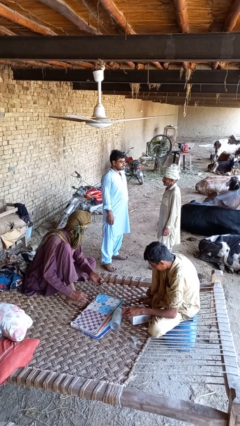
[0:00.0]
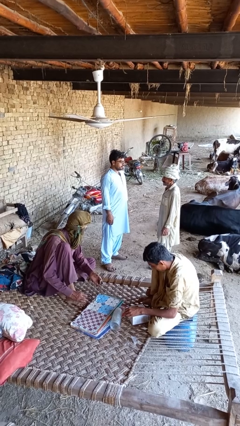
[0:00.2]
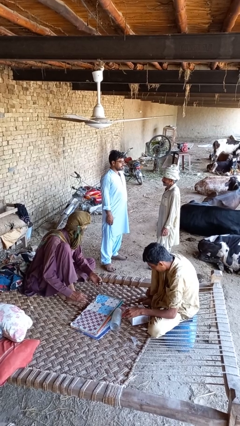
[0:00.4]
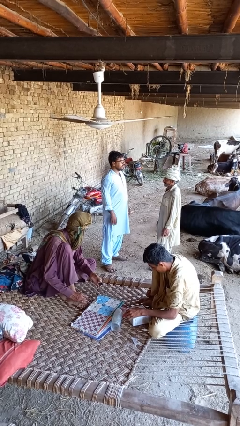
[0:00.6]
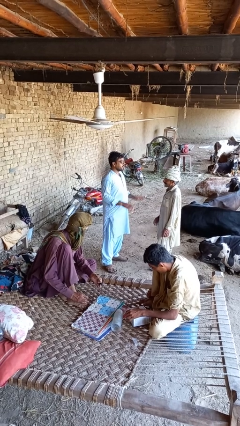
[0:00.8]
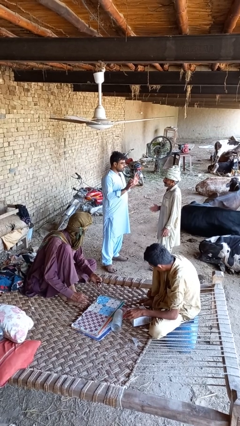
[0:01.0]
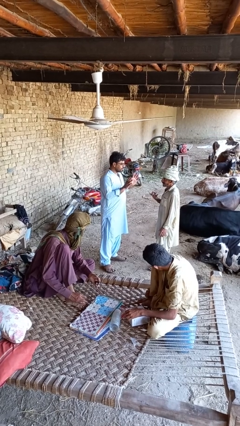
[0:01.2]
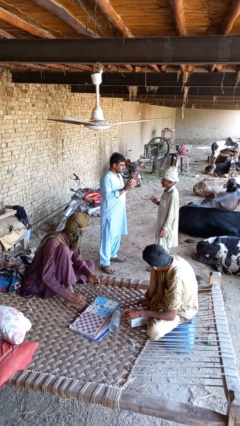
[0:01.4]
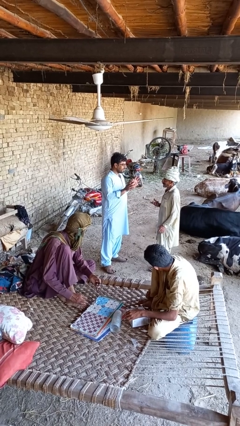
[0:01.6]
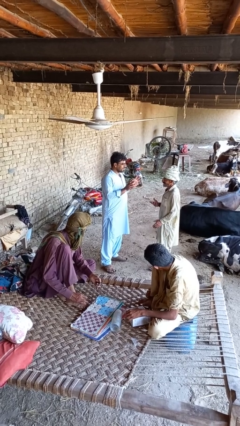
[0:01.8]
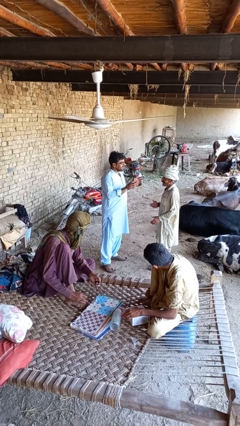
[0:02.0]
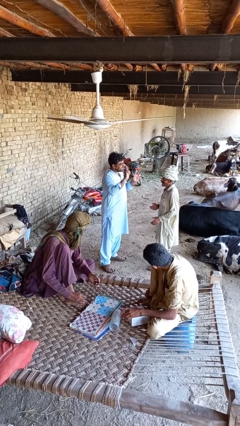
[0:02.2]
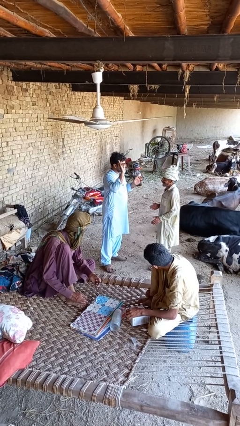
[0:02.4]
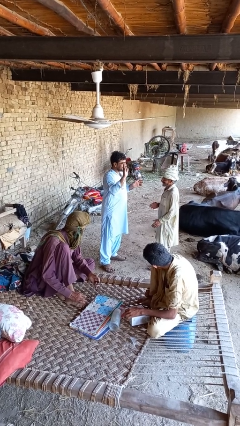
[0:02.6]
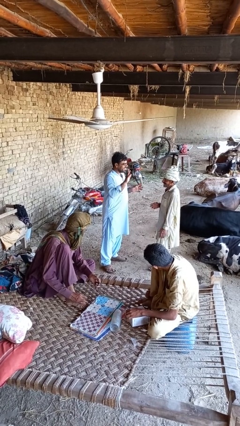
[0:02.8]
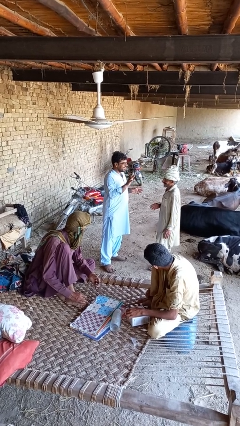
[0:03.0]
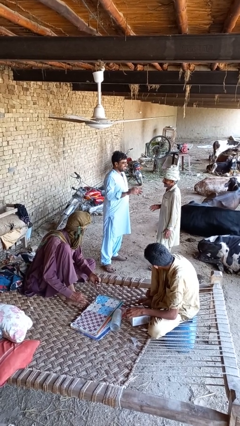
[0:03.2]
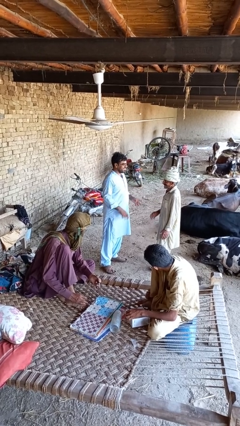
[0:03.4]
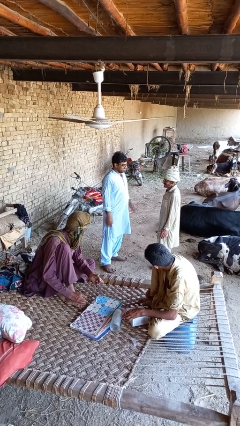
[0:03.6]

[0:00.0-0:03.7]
person talks to person

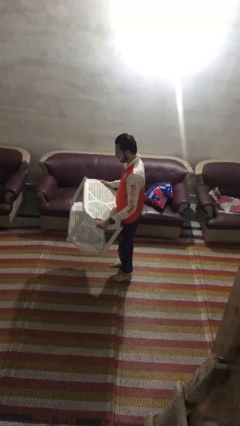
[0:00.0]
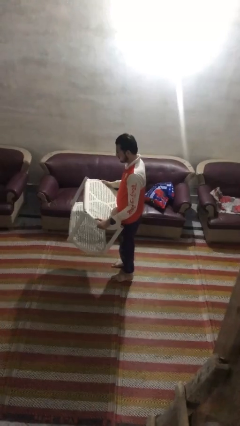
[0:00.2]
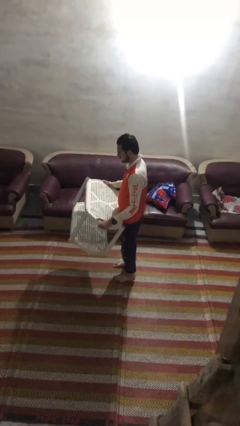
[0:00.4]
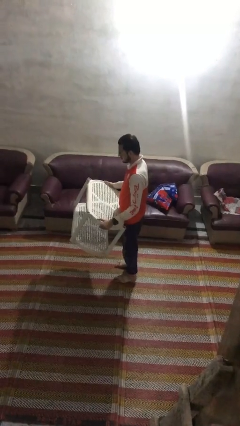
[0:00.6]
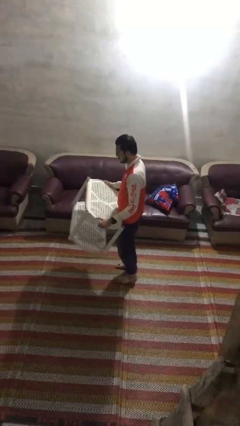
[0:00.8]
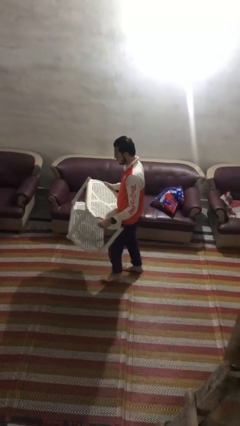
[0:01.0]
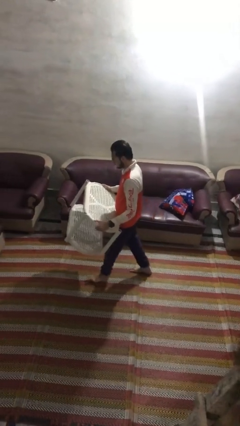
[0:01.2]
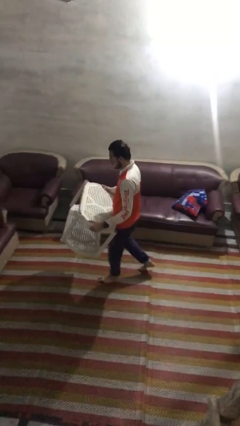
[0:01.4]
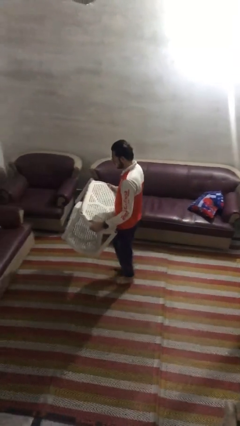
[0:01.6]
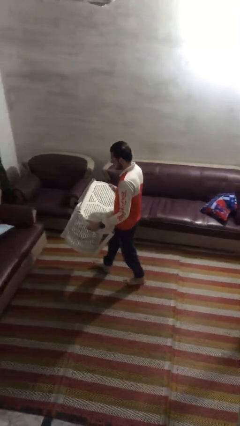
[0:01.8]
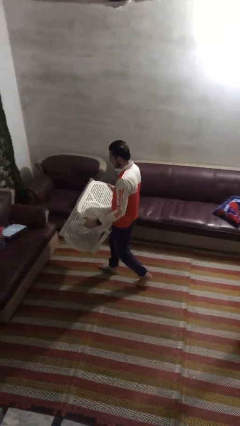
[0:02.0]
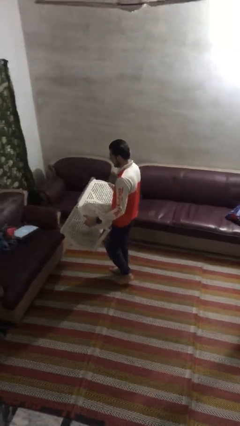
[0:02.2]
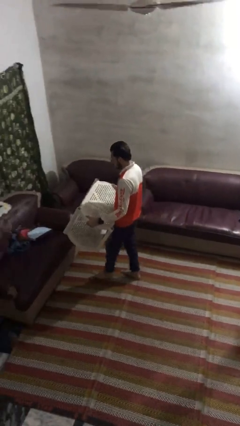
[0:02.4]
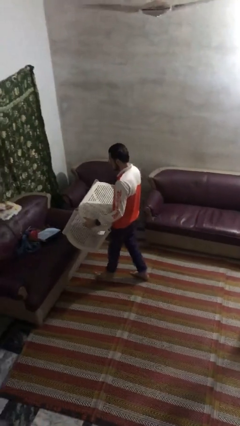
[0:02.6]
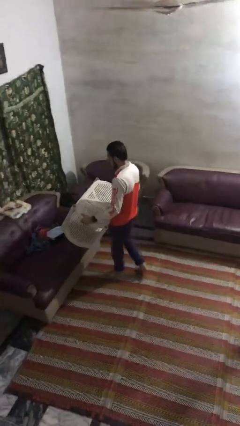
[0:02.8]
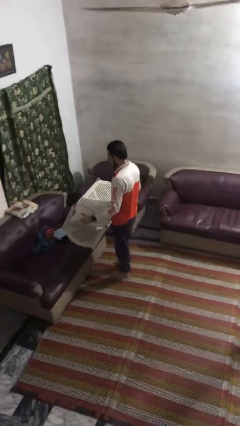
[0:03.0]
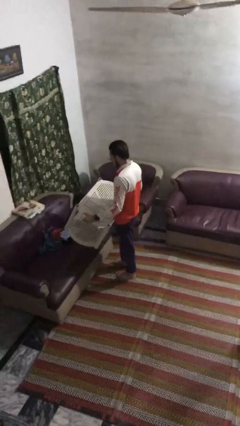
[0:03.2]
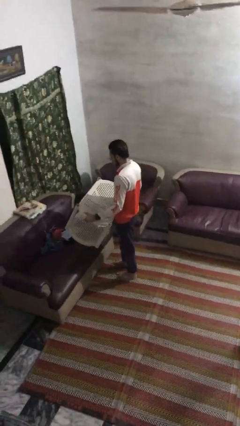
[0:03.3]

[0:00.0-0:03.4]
person carries furniture

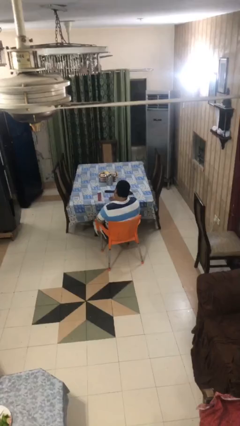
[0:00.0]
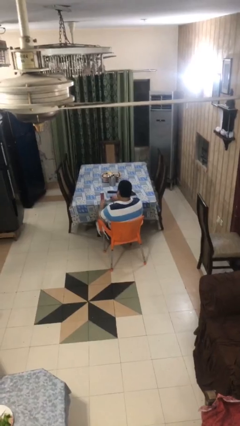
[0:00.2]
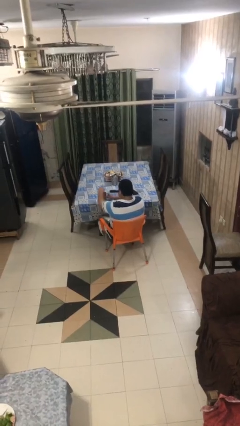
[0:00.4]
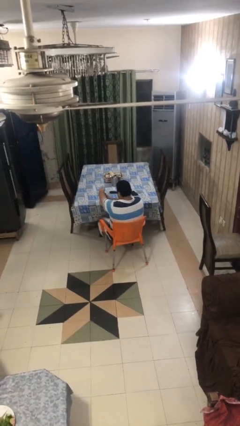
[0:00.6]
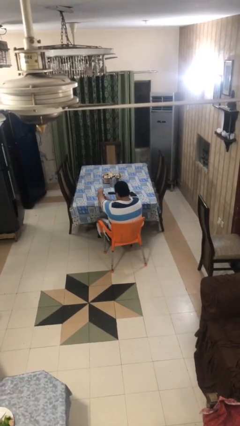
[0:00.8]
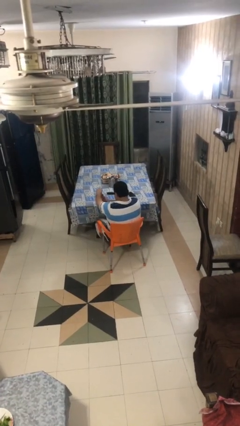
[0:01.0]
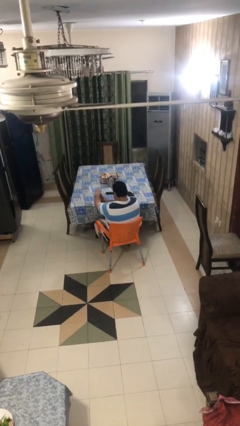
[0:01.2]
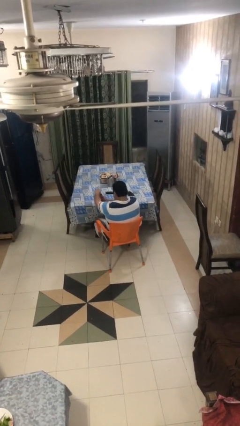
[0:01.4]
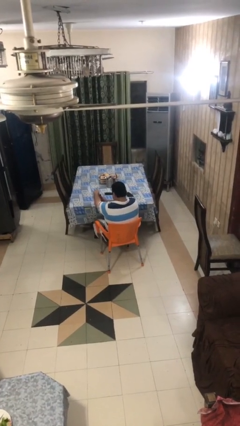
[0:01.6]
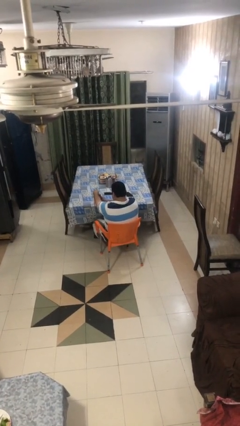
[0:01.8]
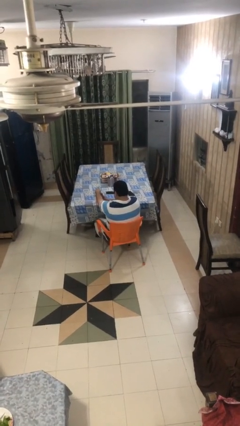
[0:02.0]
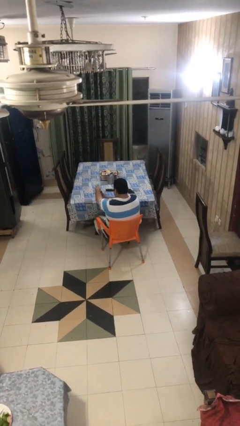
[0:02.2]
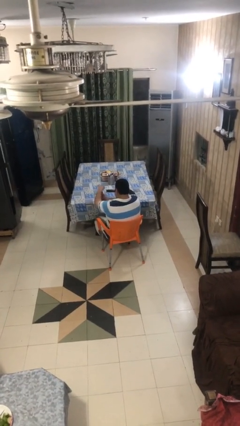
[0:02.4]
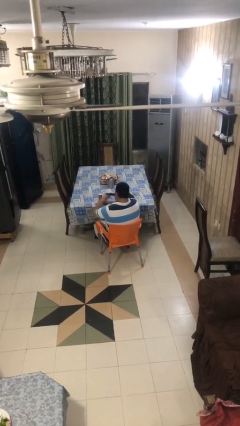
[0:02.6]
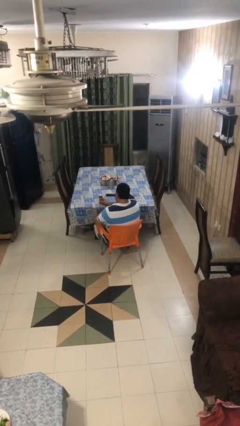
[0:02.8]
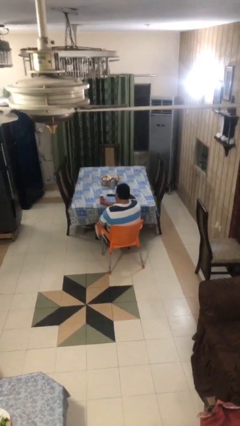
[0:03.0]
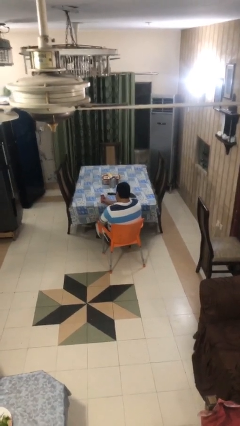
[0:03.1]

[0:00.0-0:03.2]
person opens beverage can

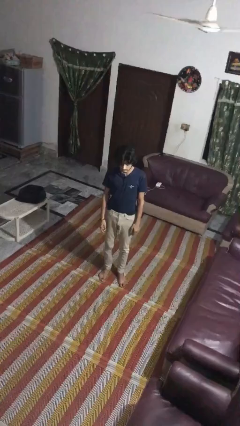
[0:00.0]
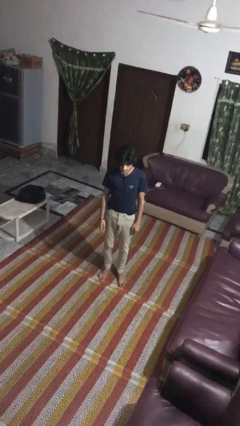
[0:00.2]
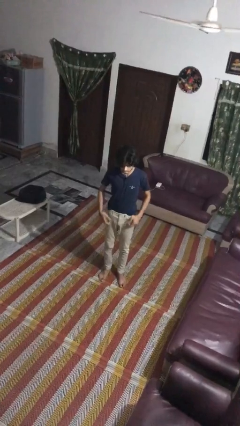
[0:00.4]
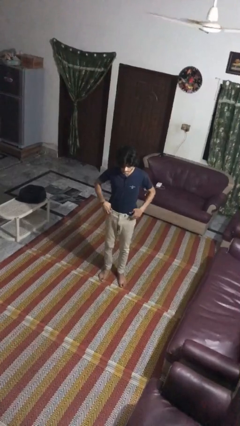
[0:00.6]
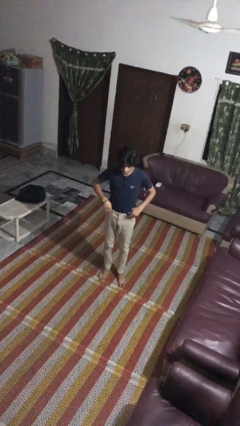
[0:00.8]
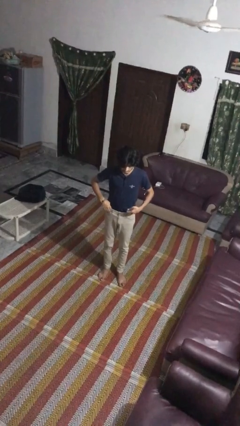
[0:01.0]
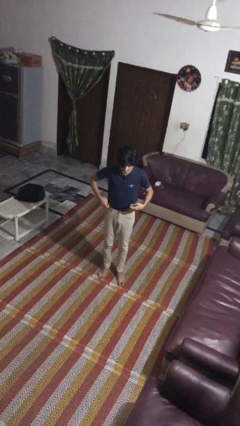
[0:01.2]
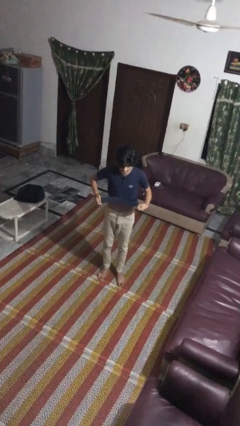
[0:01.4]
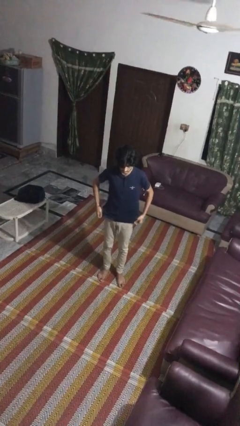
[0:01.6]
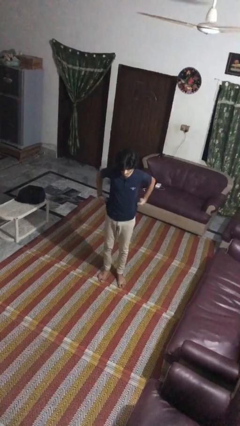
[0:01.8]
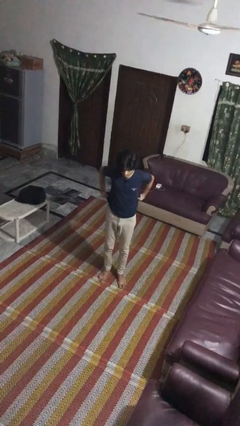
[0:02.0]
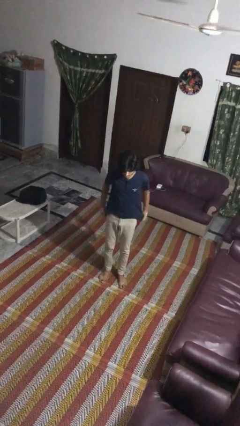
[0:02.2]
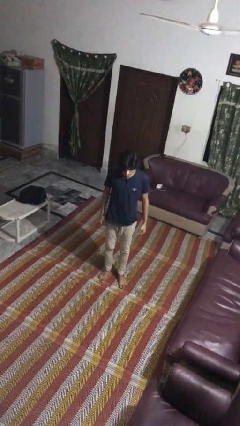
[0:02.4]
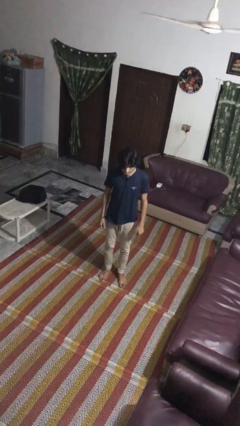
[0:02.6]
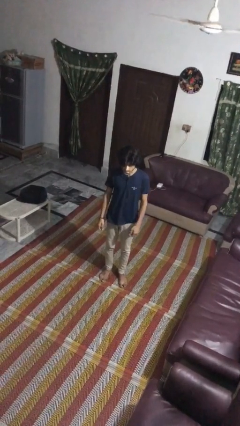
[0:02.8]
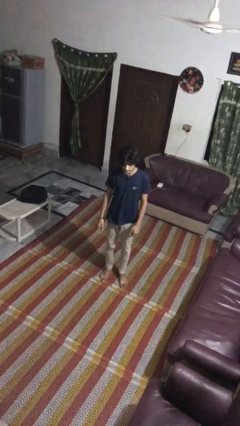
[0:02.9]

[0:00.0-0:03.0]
person untucks shirt

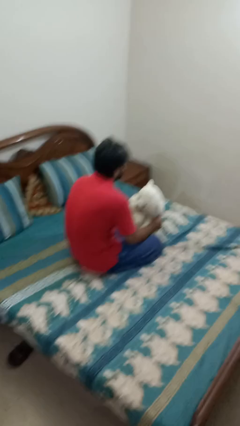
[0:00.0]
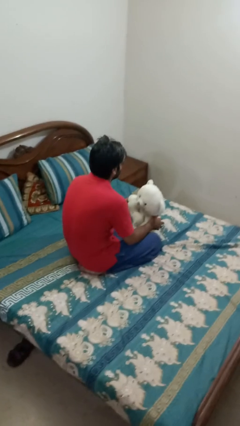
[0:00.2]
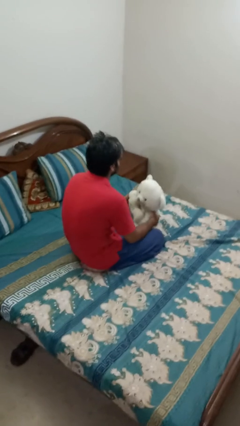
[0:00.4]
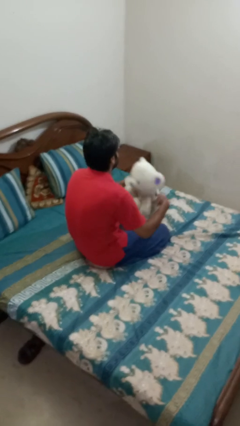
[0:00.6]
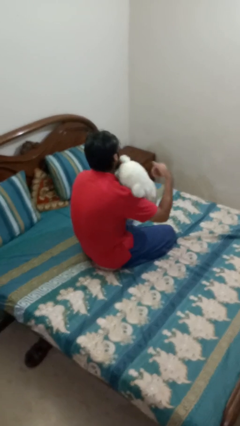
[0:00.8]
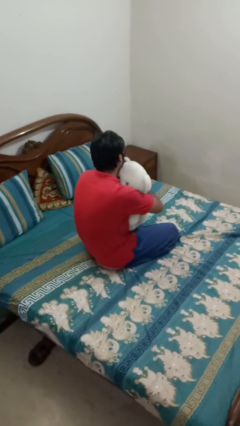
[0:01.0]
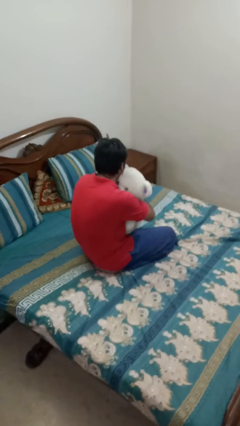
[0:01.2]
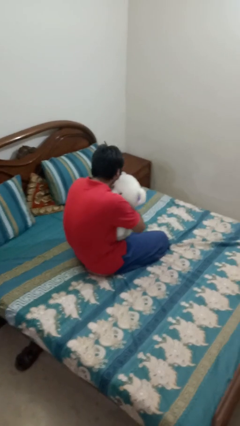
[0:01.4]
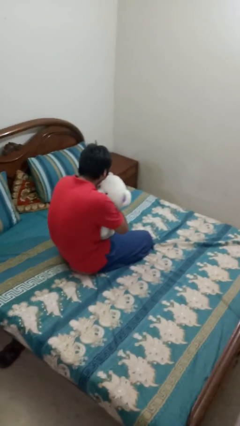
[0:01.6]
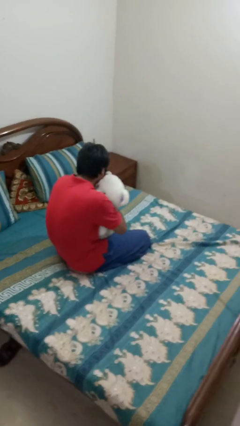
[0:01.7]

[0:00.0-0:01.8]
person hugs stuffed animal

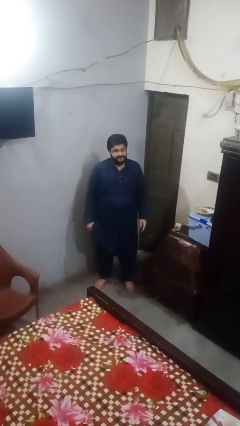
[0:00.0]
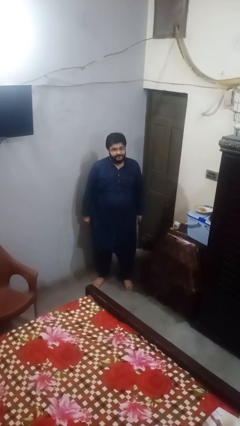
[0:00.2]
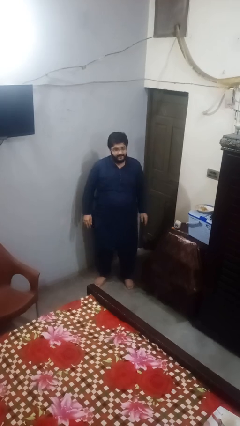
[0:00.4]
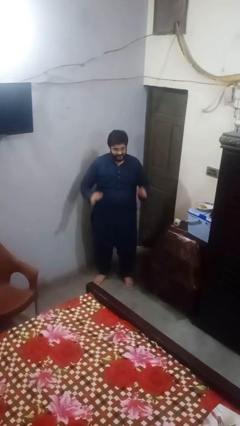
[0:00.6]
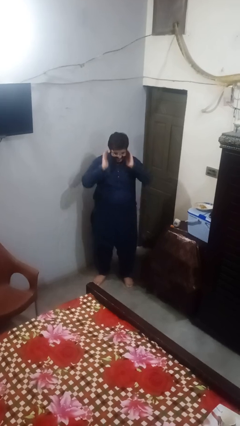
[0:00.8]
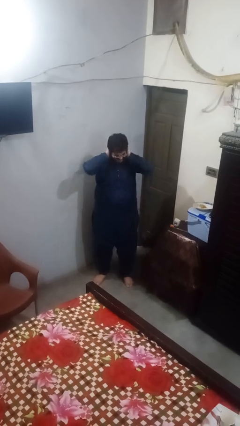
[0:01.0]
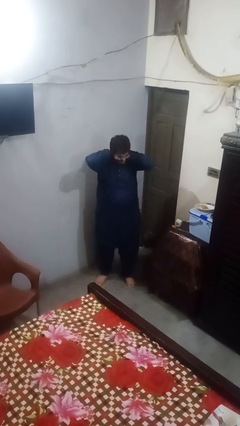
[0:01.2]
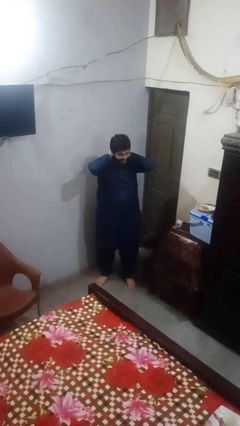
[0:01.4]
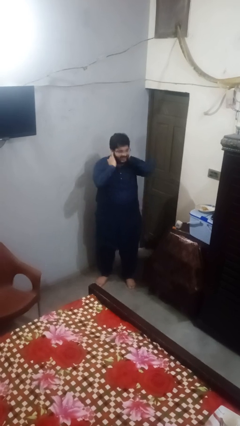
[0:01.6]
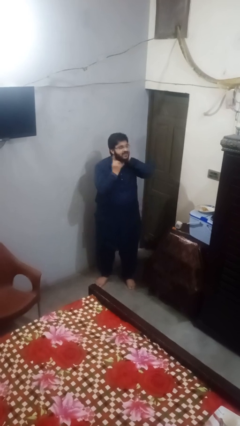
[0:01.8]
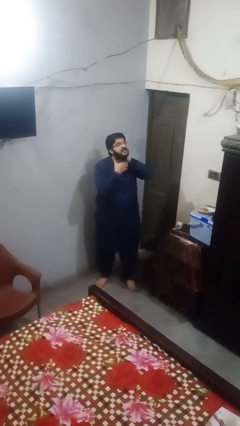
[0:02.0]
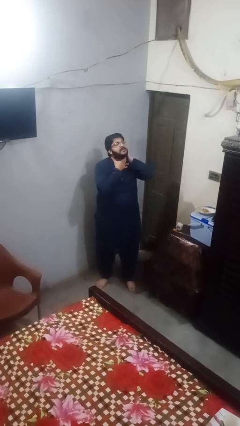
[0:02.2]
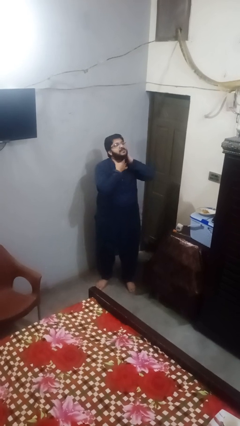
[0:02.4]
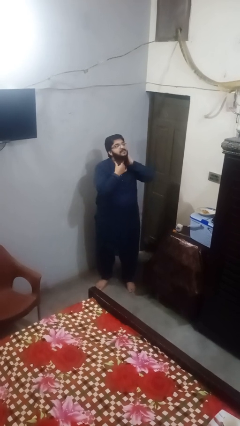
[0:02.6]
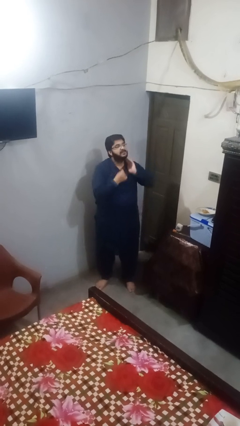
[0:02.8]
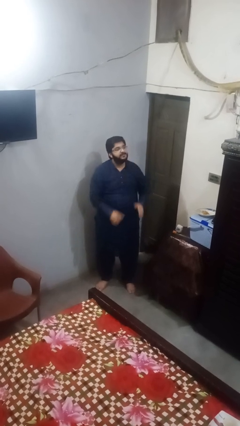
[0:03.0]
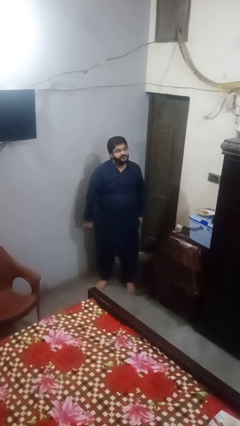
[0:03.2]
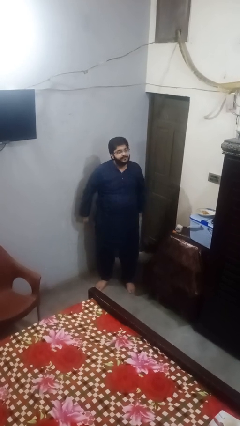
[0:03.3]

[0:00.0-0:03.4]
person rubs neck
